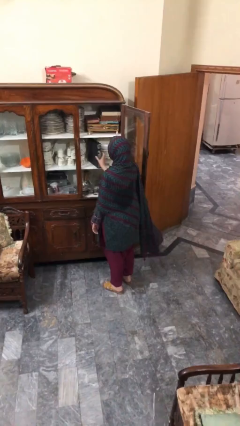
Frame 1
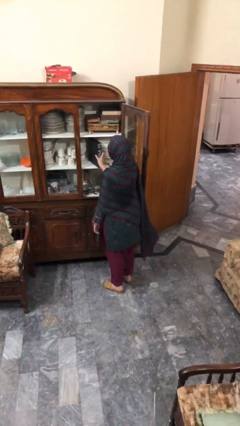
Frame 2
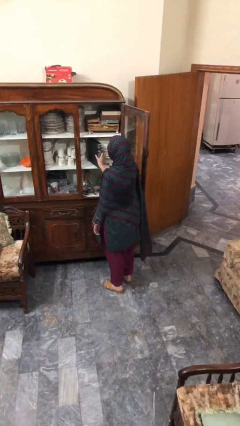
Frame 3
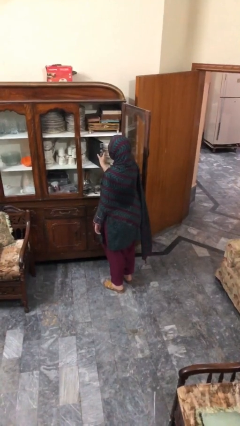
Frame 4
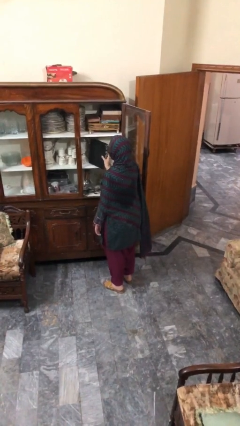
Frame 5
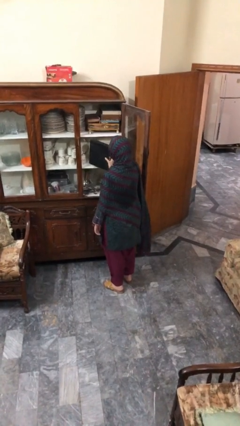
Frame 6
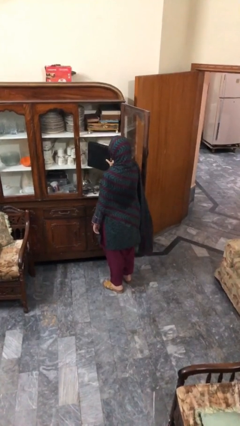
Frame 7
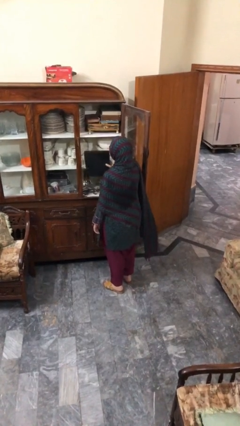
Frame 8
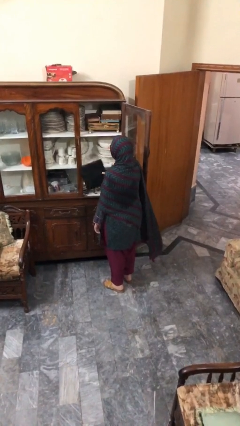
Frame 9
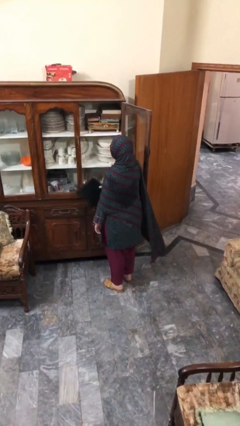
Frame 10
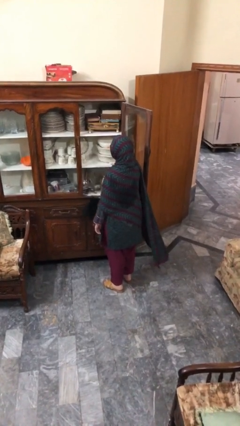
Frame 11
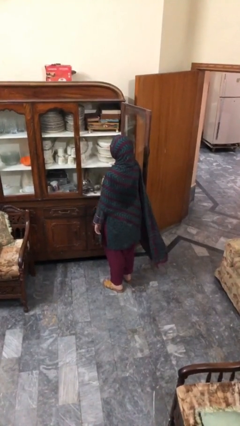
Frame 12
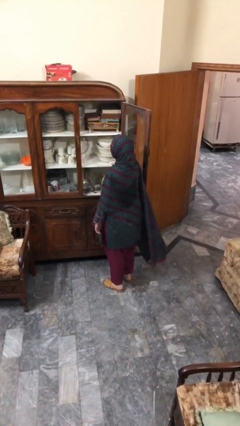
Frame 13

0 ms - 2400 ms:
person picks up object from countertop

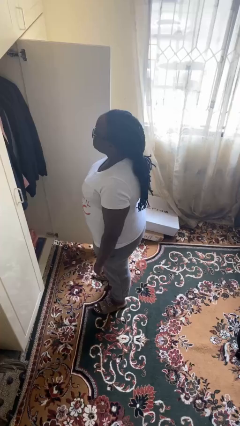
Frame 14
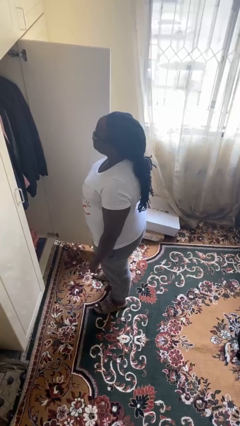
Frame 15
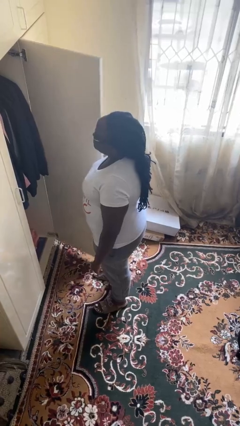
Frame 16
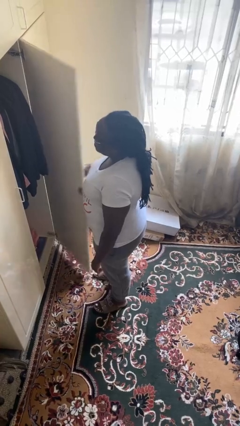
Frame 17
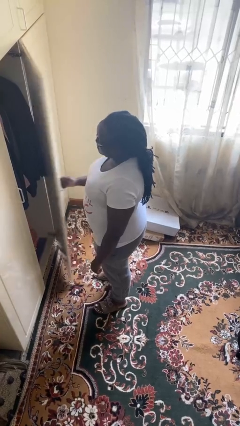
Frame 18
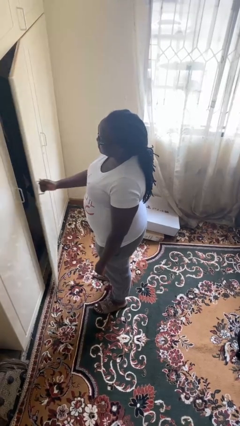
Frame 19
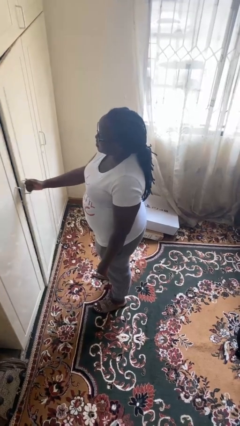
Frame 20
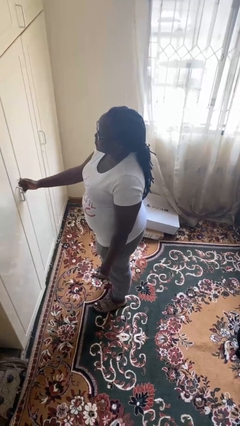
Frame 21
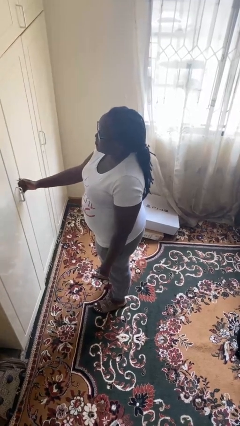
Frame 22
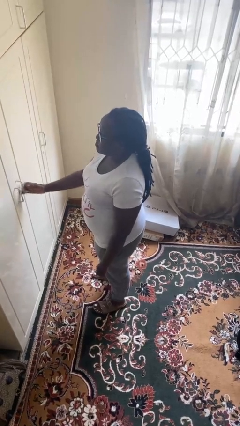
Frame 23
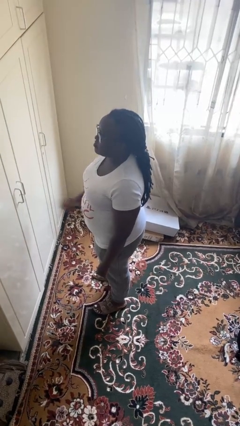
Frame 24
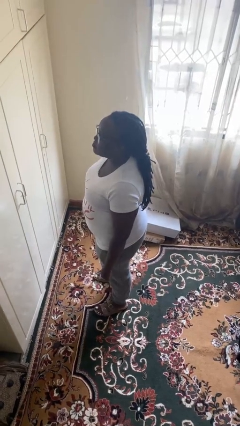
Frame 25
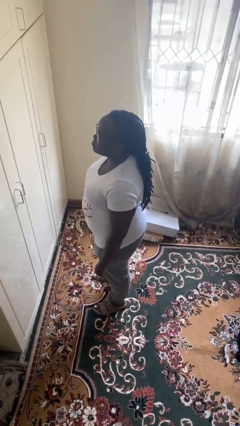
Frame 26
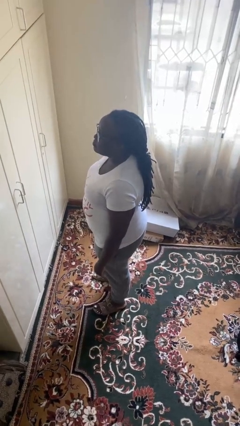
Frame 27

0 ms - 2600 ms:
person closes closet door

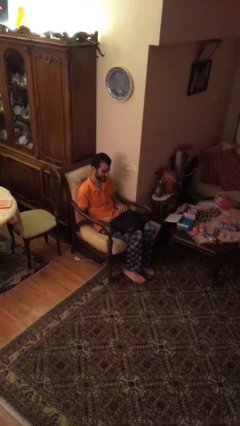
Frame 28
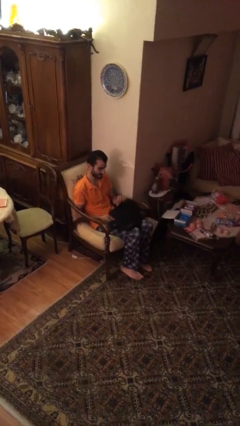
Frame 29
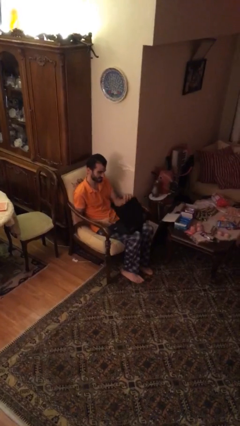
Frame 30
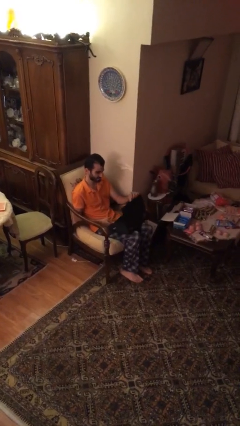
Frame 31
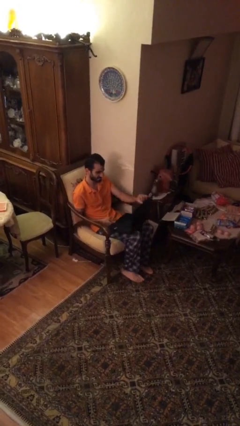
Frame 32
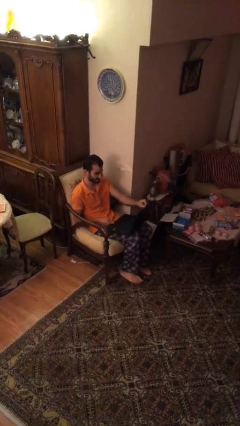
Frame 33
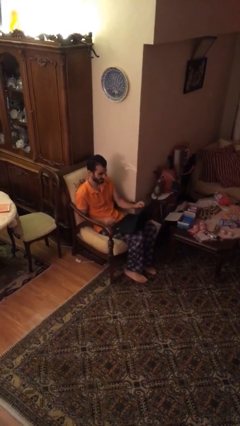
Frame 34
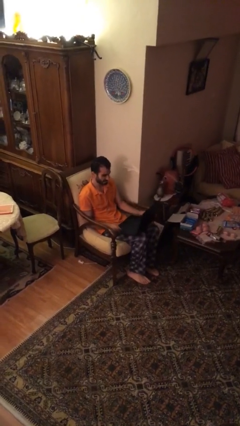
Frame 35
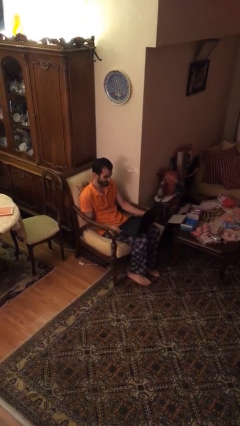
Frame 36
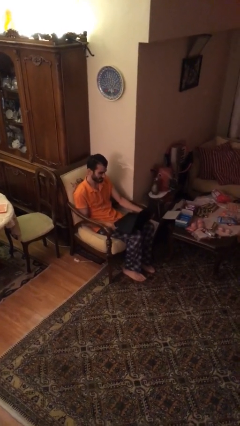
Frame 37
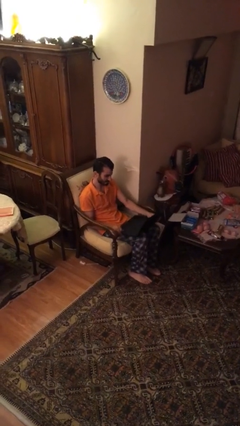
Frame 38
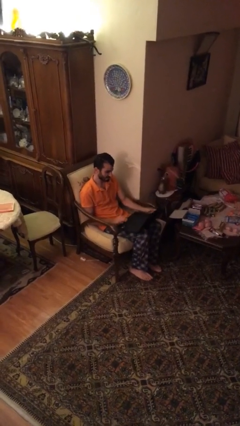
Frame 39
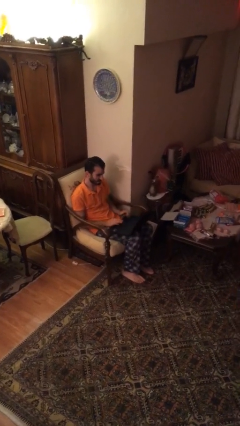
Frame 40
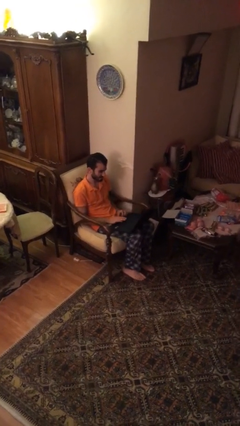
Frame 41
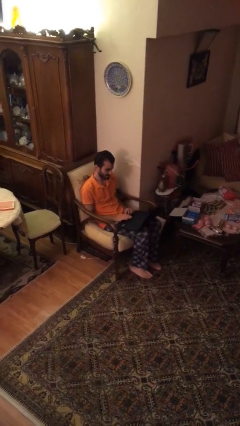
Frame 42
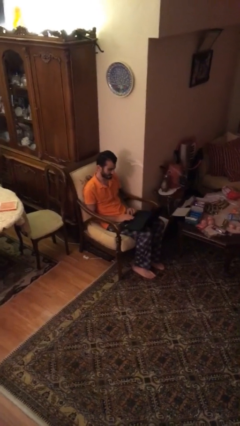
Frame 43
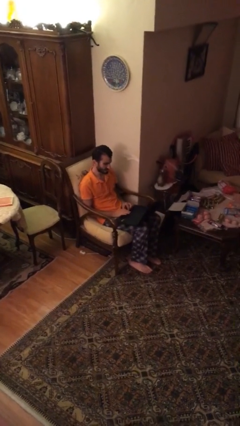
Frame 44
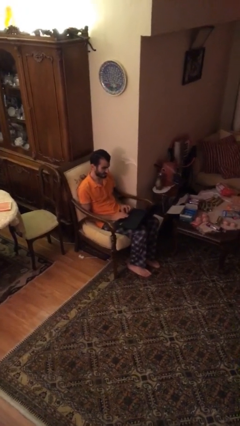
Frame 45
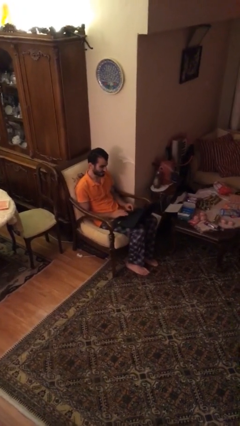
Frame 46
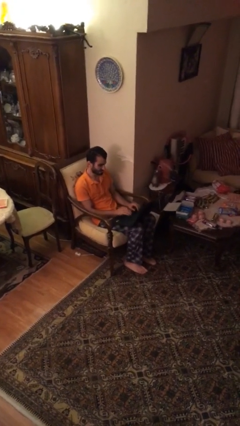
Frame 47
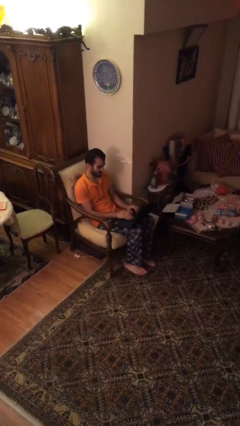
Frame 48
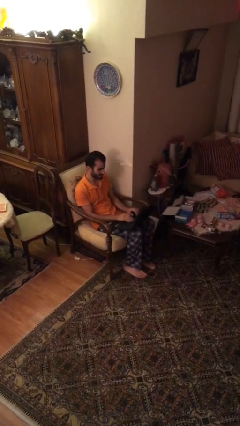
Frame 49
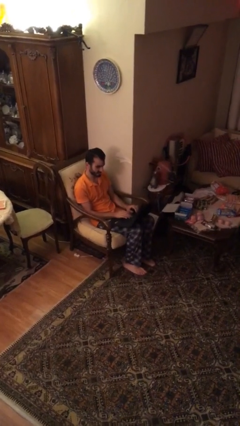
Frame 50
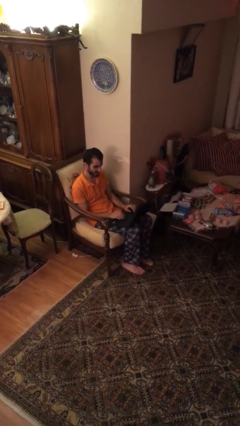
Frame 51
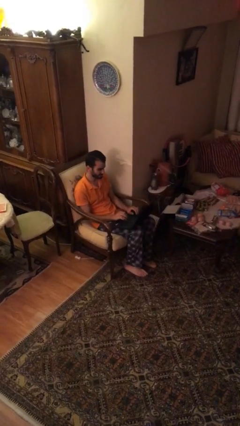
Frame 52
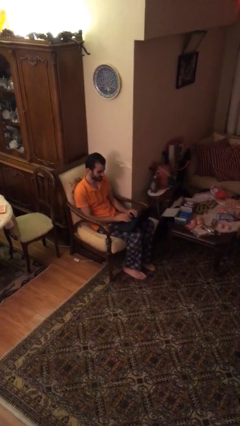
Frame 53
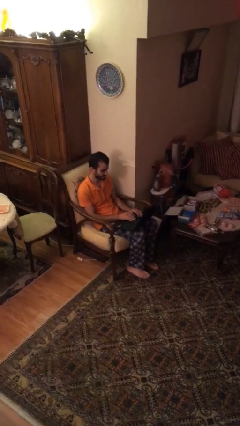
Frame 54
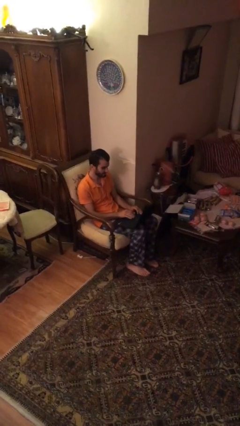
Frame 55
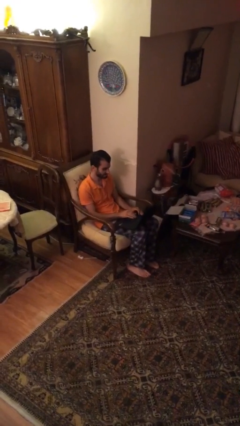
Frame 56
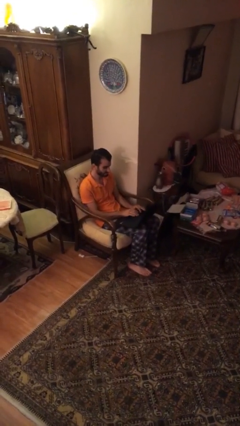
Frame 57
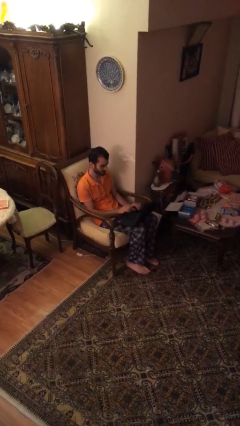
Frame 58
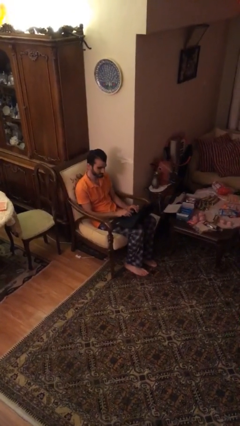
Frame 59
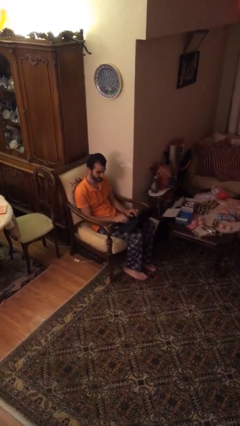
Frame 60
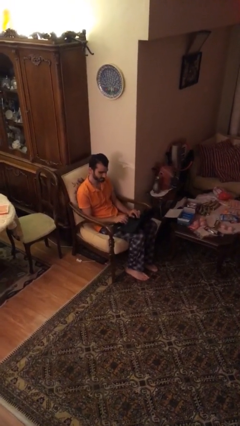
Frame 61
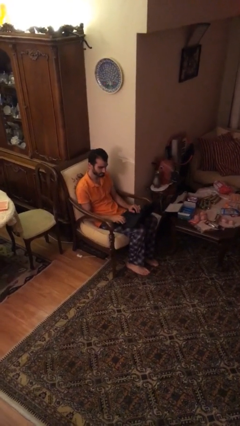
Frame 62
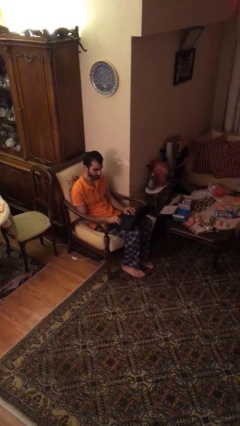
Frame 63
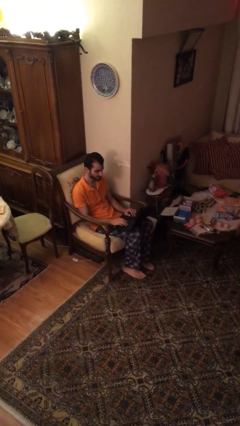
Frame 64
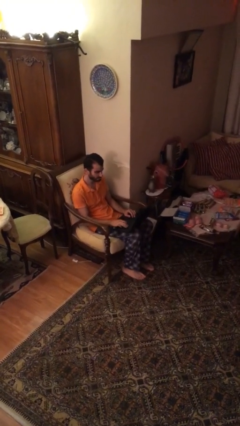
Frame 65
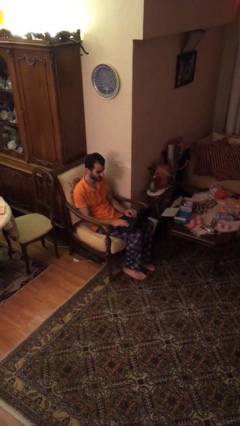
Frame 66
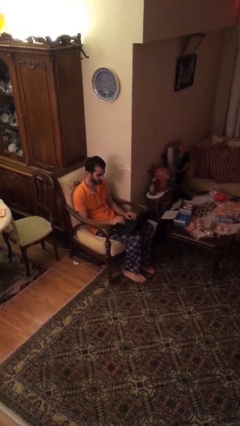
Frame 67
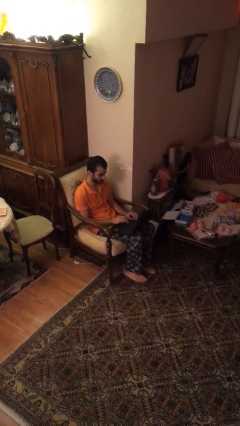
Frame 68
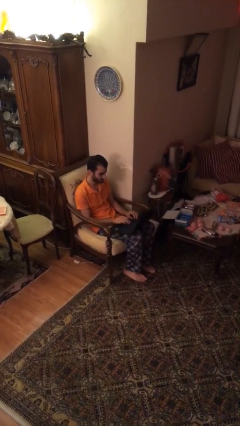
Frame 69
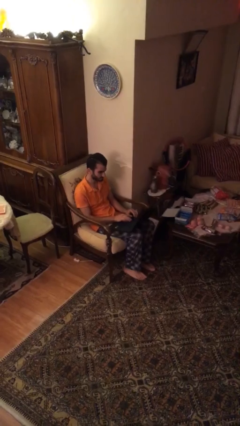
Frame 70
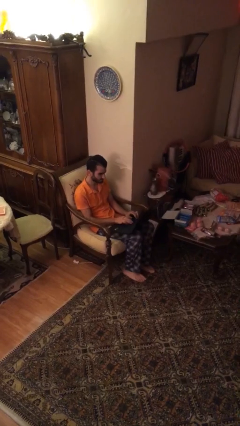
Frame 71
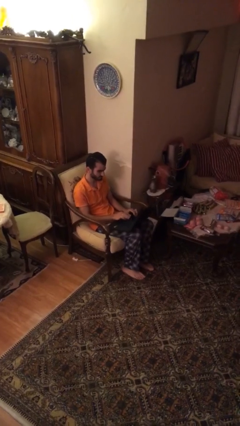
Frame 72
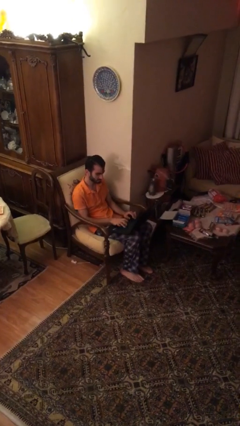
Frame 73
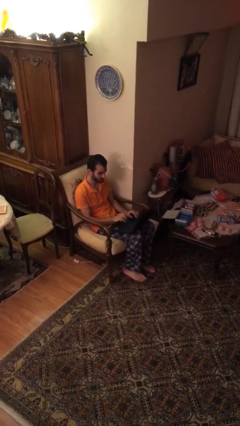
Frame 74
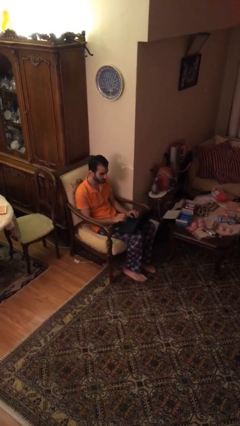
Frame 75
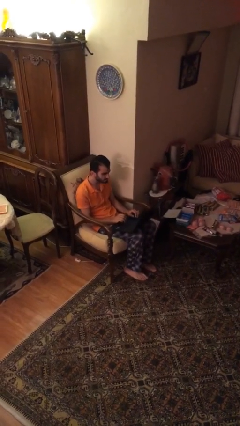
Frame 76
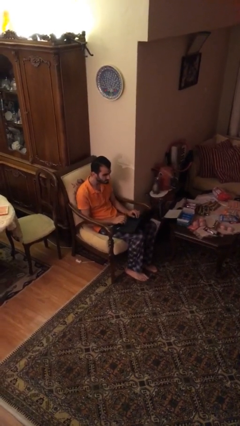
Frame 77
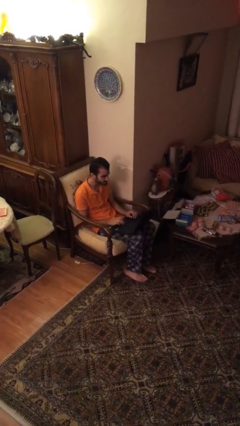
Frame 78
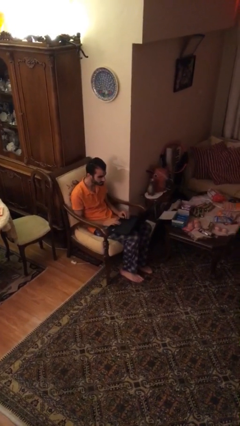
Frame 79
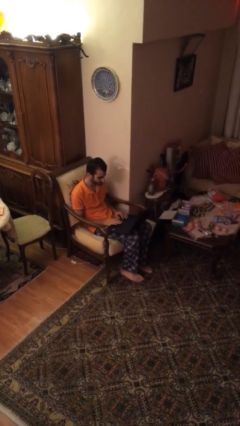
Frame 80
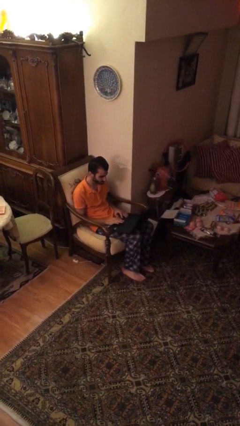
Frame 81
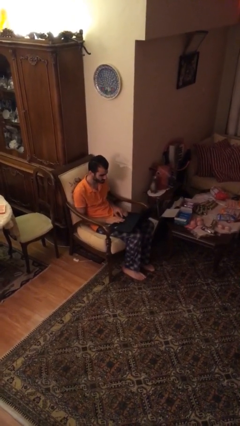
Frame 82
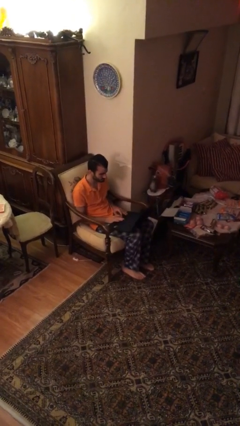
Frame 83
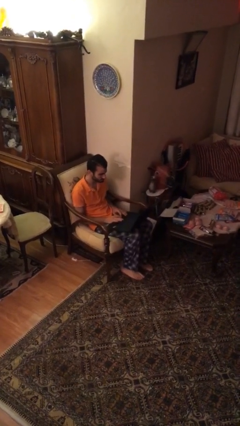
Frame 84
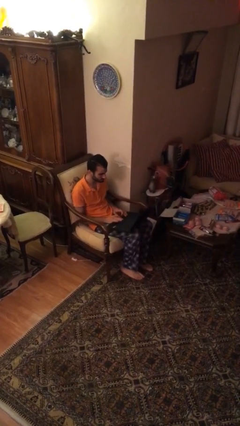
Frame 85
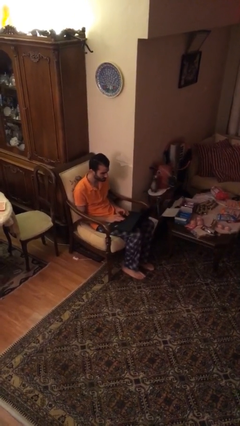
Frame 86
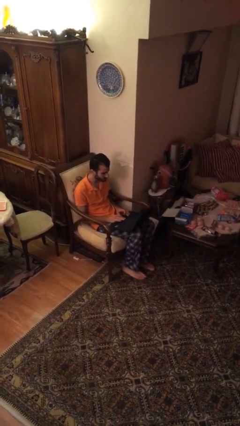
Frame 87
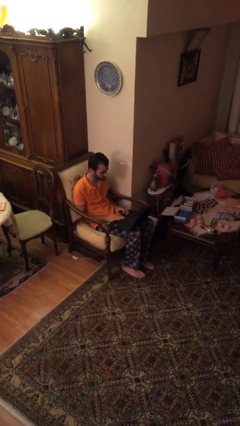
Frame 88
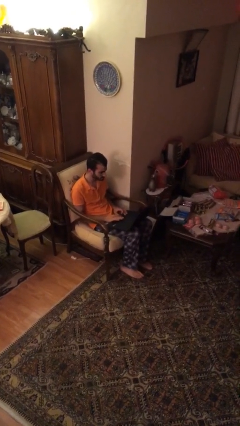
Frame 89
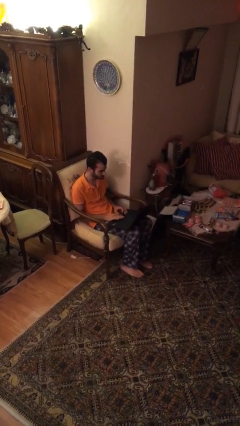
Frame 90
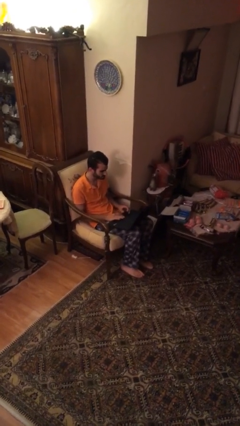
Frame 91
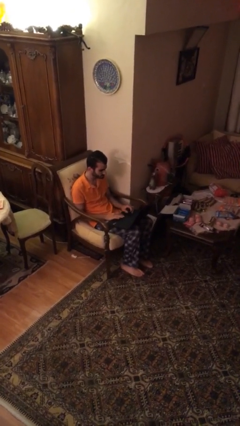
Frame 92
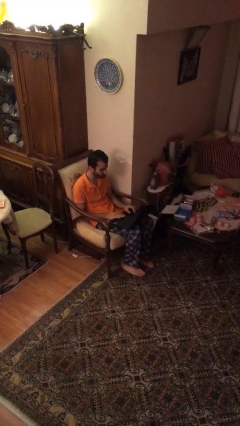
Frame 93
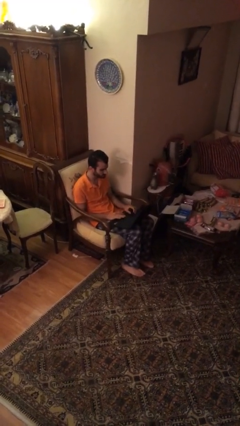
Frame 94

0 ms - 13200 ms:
person interacts with laptop
